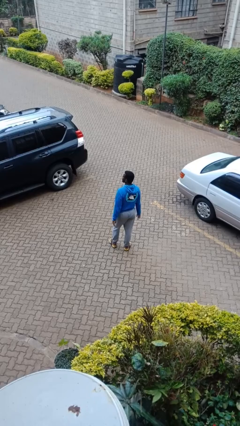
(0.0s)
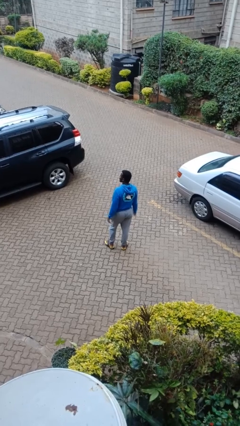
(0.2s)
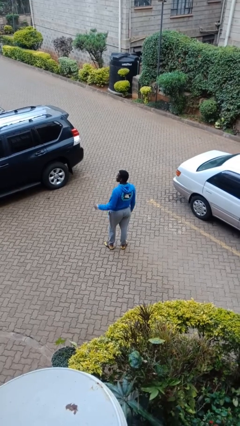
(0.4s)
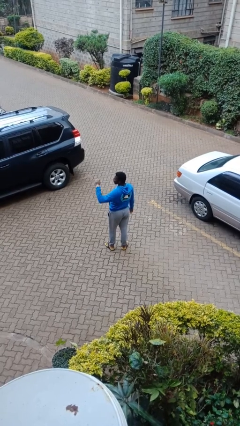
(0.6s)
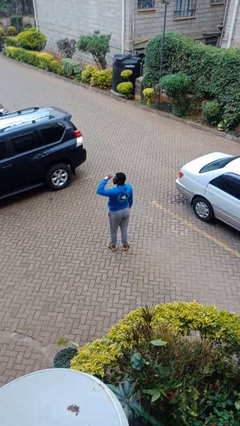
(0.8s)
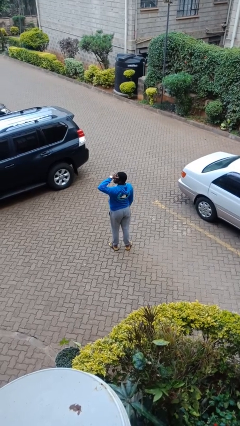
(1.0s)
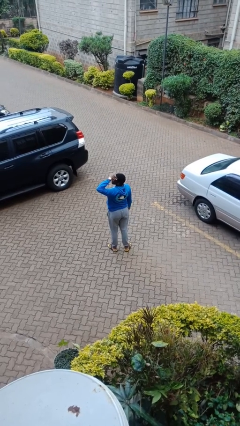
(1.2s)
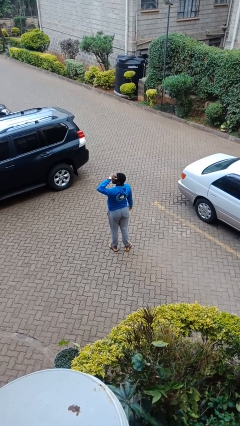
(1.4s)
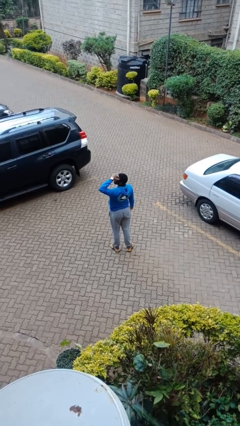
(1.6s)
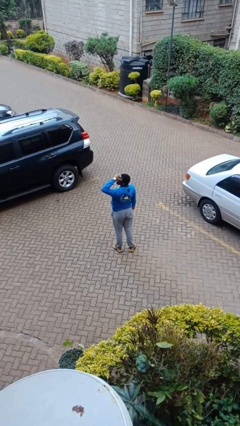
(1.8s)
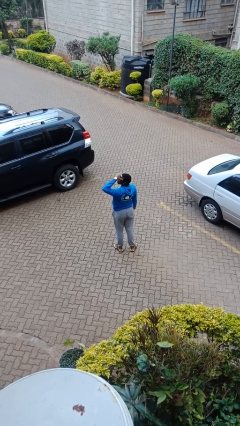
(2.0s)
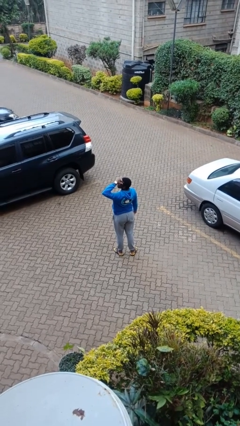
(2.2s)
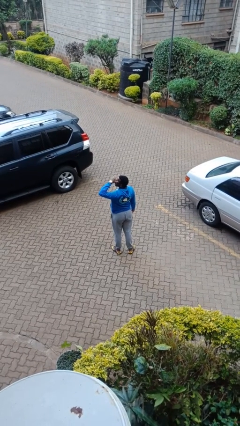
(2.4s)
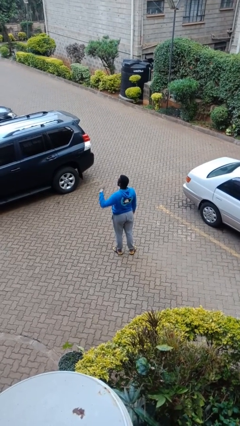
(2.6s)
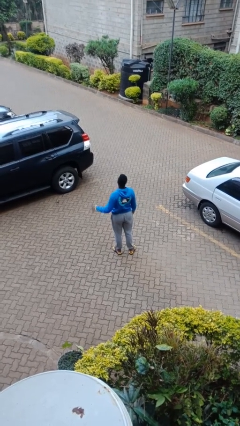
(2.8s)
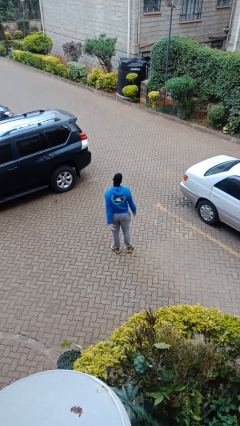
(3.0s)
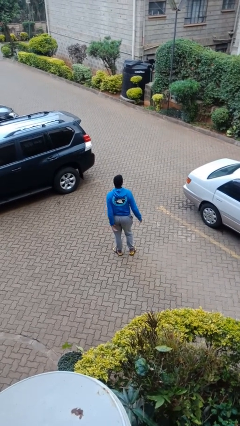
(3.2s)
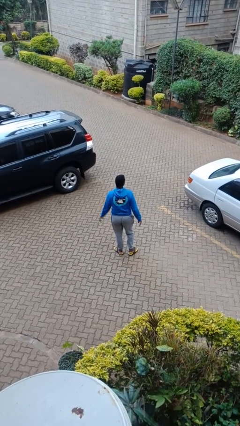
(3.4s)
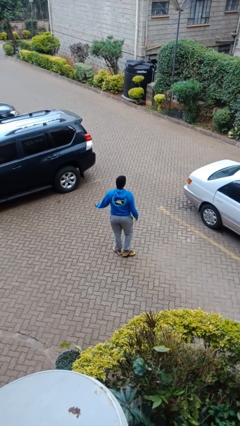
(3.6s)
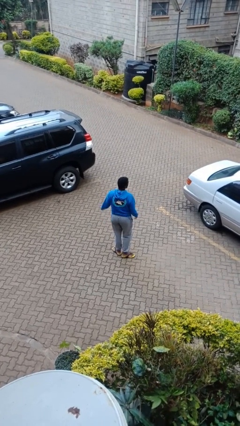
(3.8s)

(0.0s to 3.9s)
person shades eyes

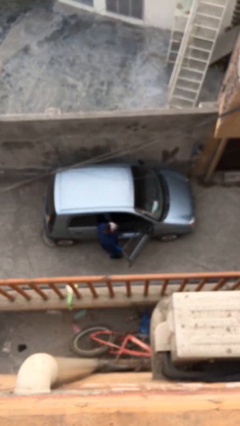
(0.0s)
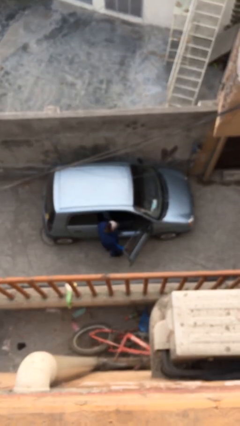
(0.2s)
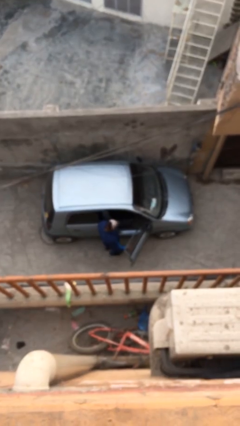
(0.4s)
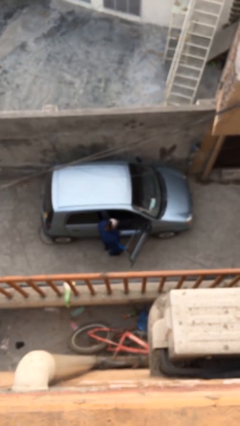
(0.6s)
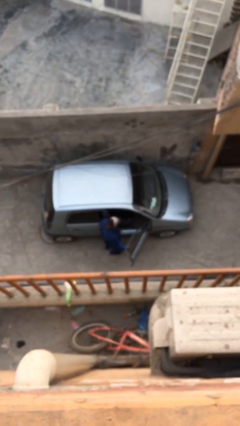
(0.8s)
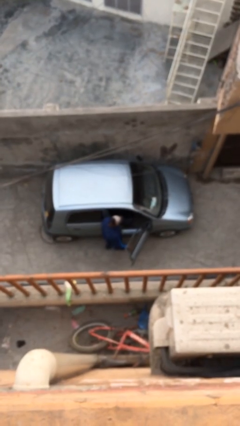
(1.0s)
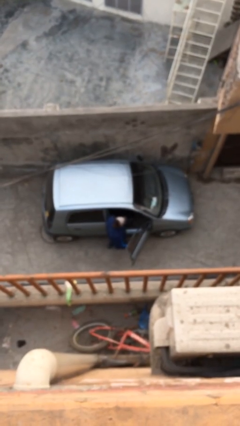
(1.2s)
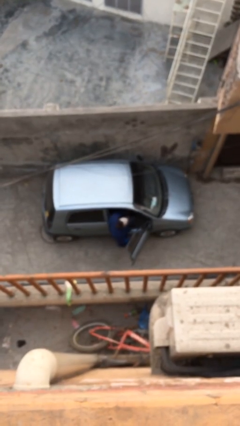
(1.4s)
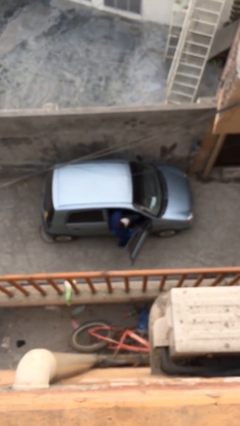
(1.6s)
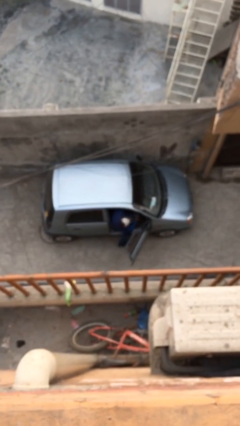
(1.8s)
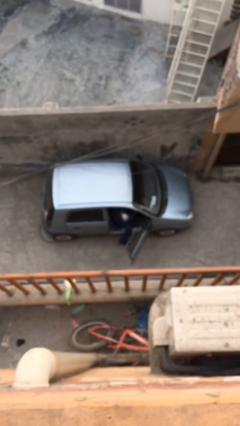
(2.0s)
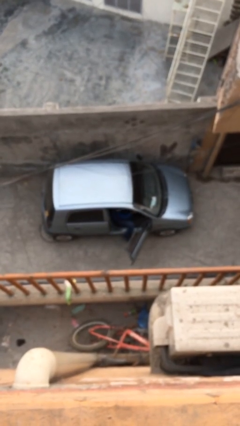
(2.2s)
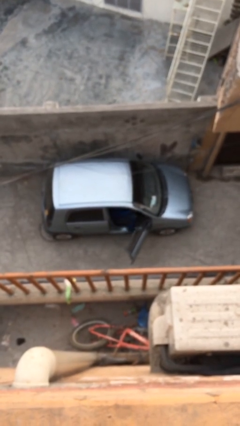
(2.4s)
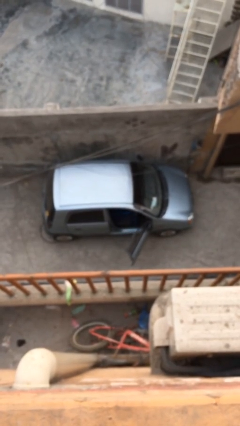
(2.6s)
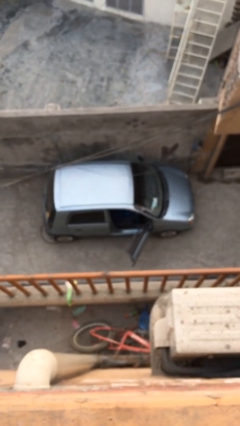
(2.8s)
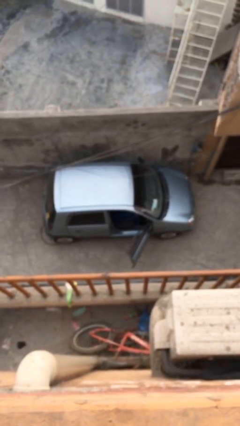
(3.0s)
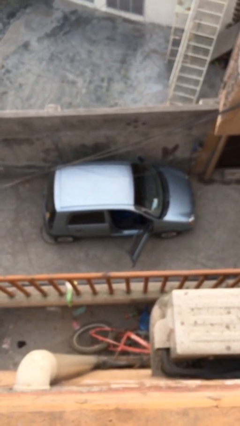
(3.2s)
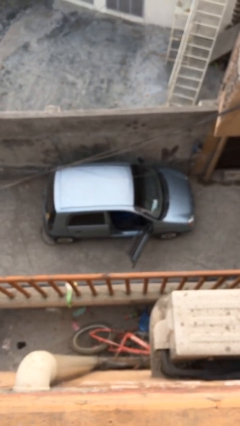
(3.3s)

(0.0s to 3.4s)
person enters car

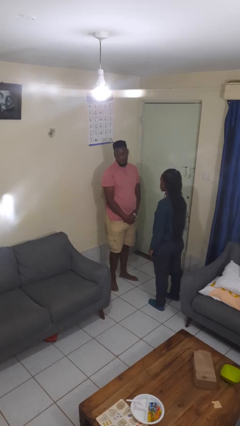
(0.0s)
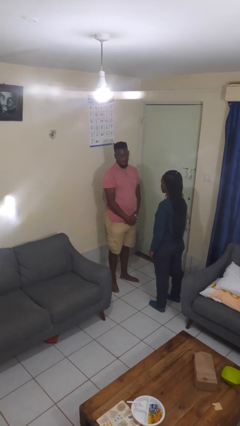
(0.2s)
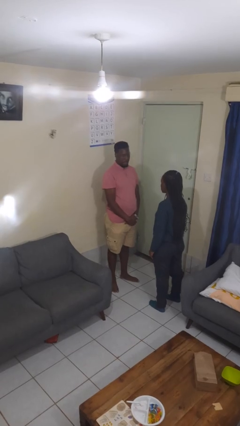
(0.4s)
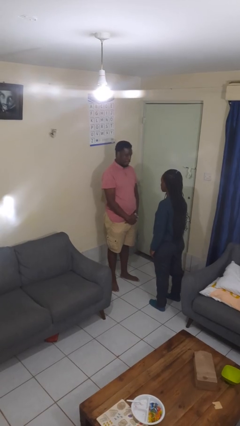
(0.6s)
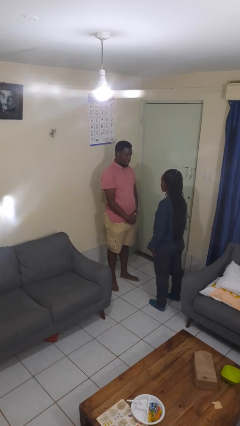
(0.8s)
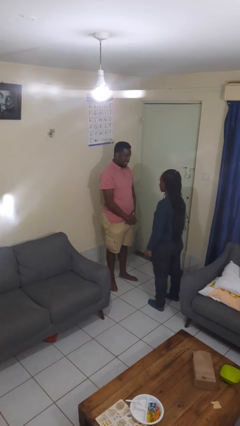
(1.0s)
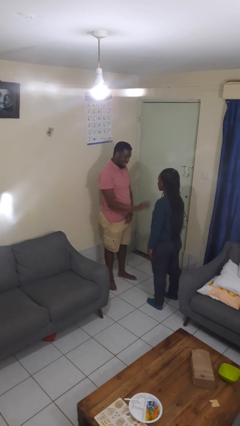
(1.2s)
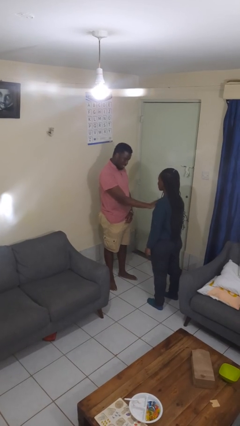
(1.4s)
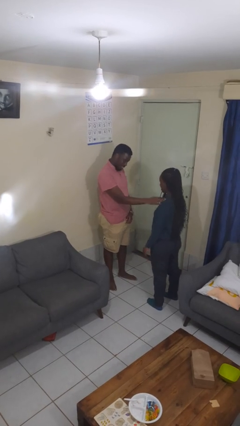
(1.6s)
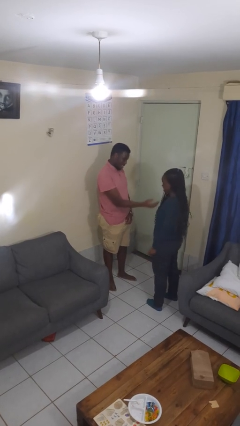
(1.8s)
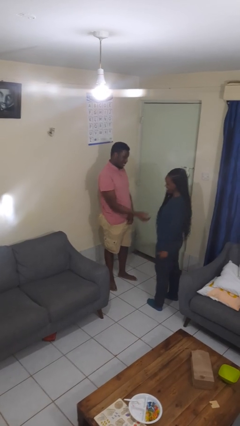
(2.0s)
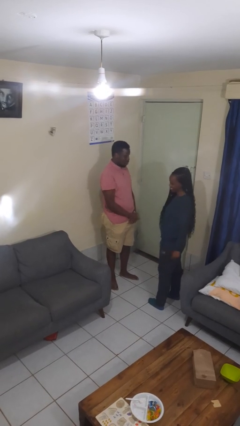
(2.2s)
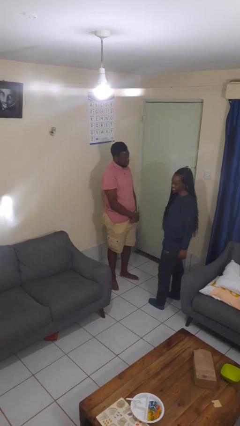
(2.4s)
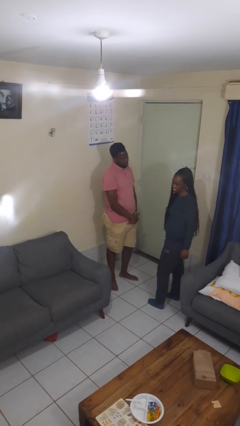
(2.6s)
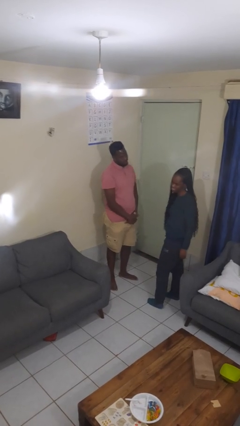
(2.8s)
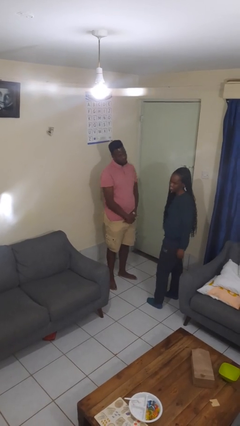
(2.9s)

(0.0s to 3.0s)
person shoves person

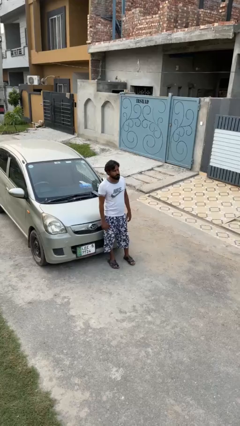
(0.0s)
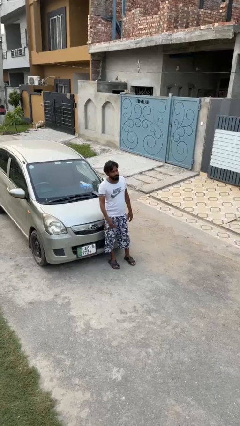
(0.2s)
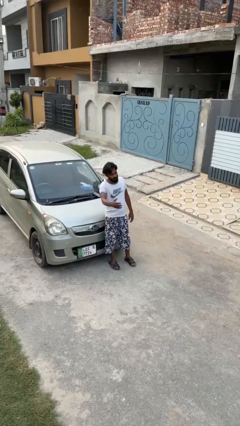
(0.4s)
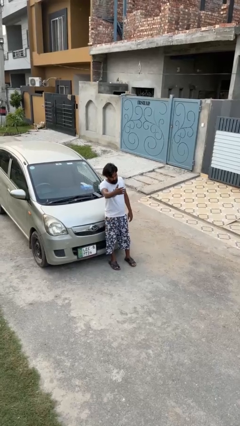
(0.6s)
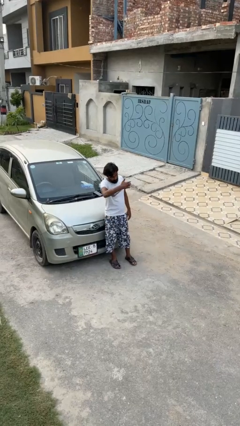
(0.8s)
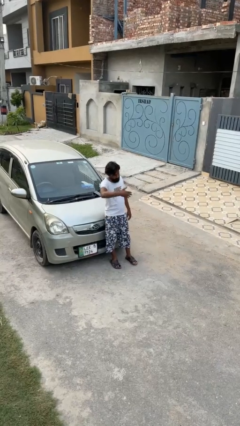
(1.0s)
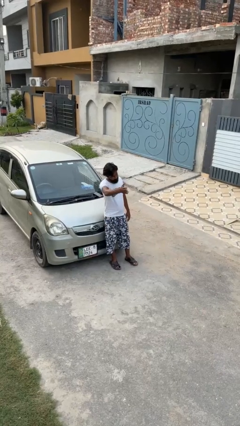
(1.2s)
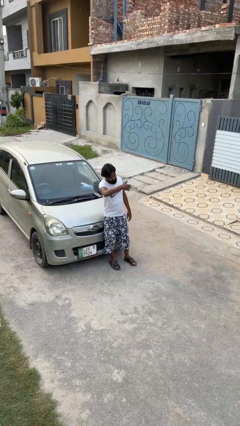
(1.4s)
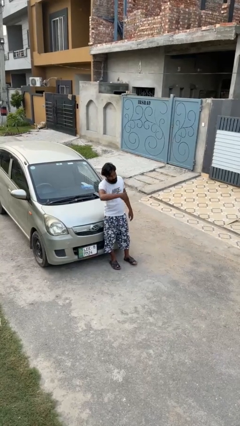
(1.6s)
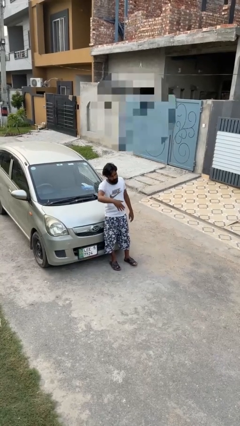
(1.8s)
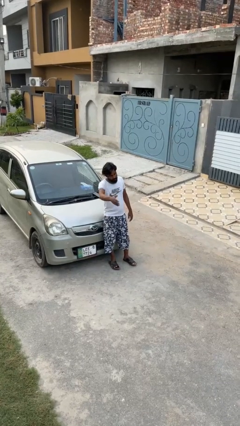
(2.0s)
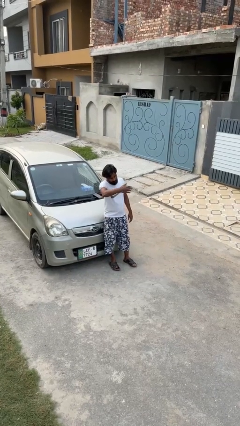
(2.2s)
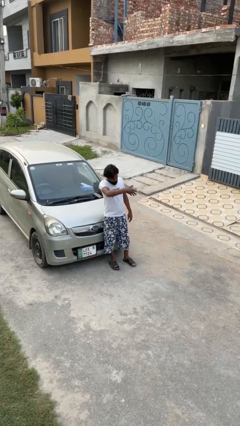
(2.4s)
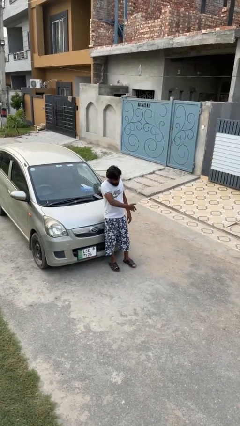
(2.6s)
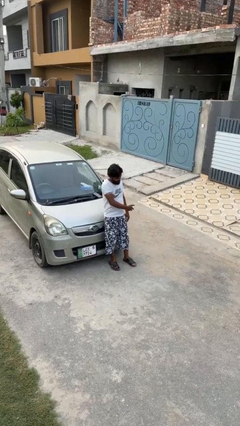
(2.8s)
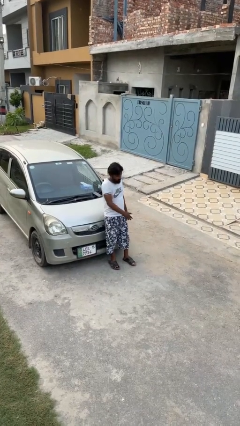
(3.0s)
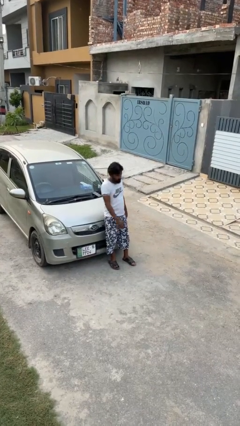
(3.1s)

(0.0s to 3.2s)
person gestures come here

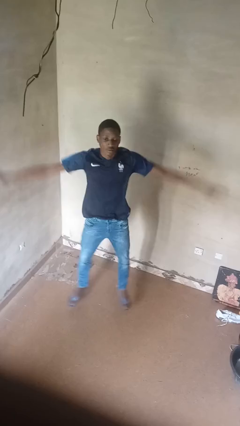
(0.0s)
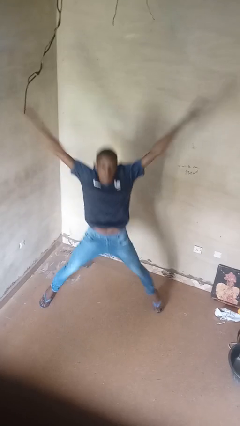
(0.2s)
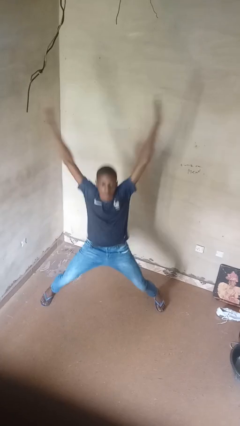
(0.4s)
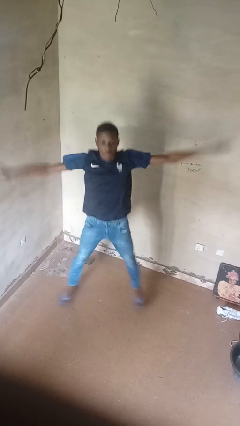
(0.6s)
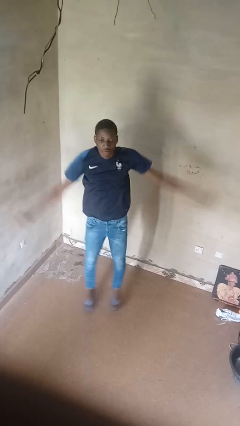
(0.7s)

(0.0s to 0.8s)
person exercises with jumping jacks

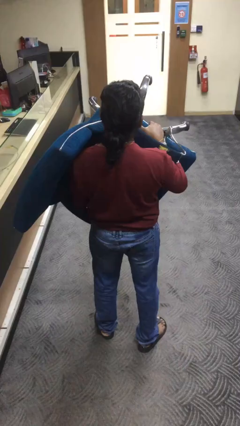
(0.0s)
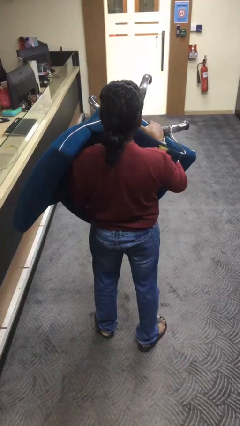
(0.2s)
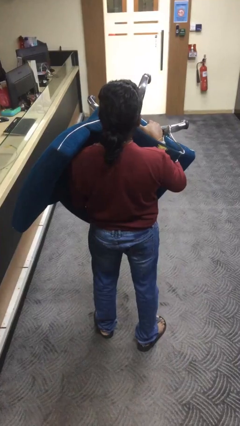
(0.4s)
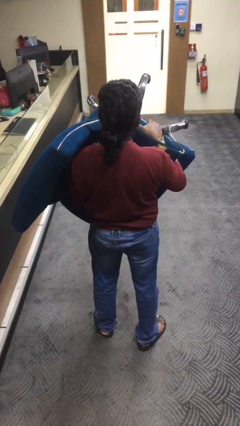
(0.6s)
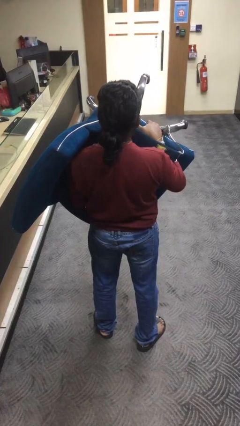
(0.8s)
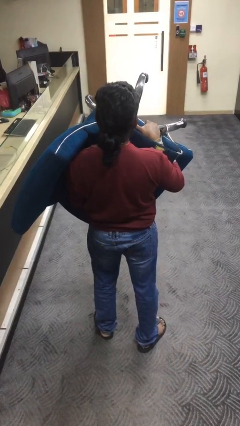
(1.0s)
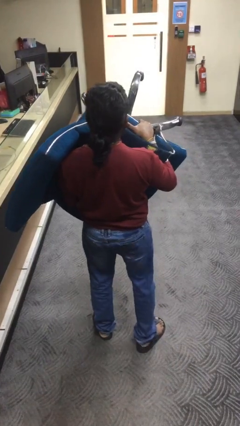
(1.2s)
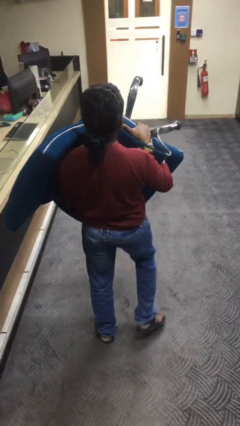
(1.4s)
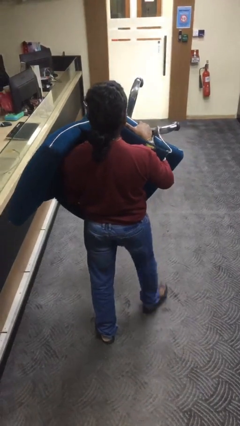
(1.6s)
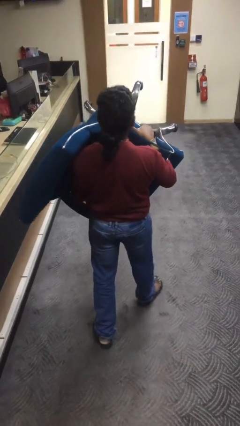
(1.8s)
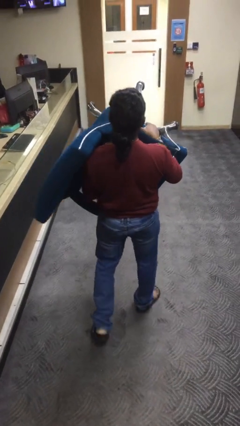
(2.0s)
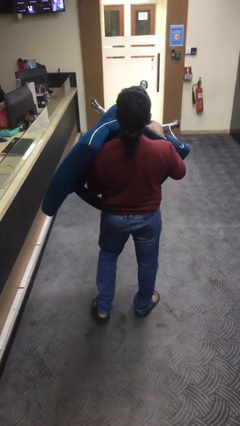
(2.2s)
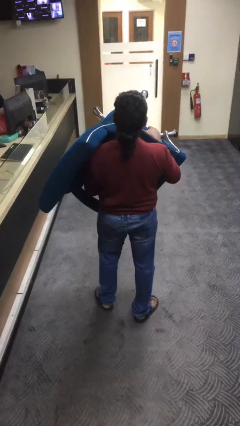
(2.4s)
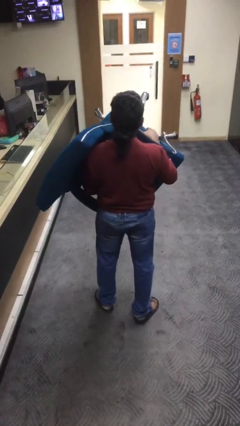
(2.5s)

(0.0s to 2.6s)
person carries furniture

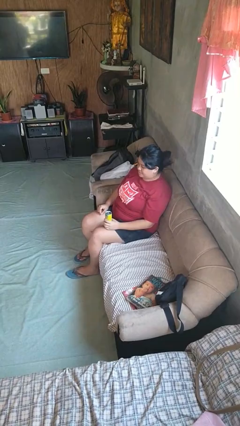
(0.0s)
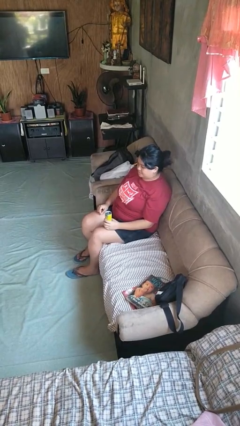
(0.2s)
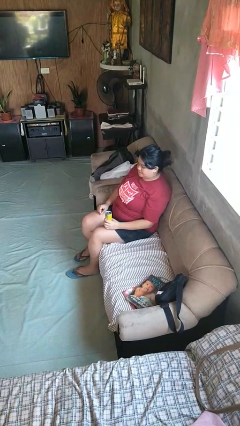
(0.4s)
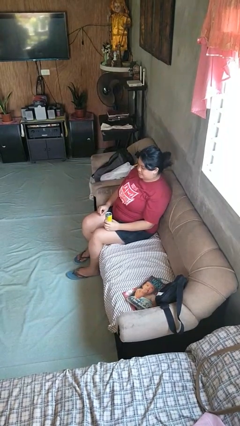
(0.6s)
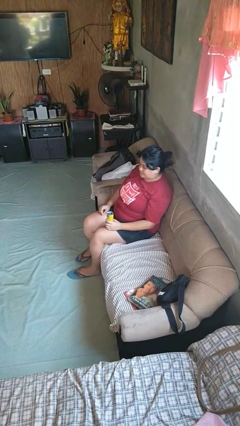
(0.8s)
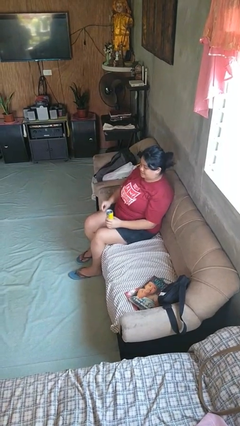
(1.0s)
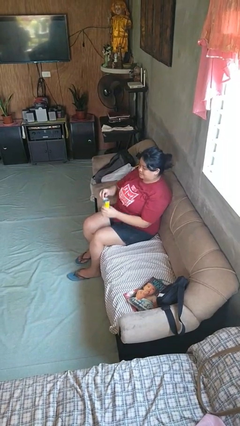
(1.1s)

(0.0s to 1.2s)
person opens beverage can
